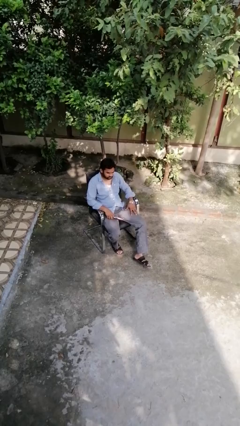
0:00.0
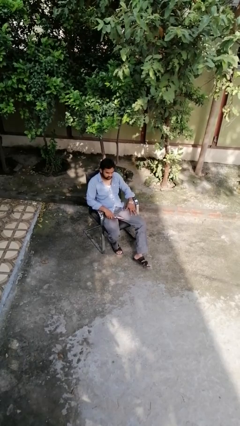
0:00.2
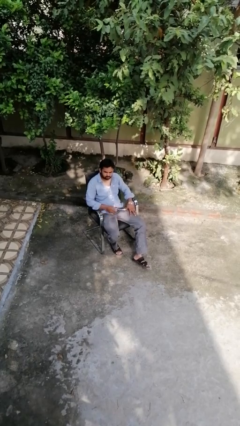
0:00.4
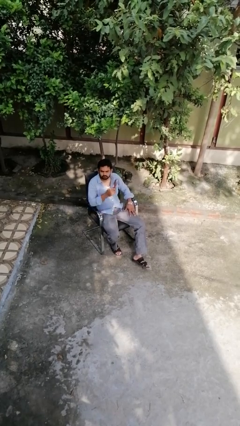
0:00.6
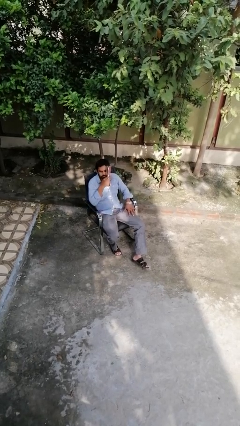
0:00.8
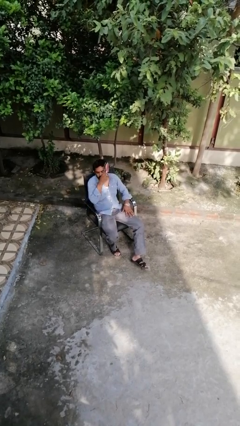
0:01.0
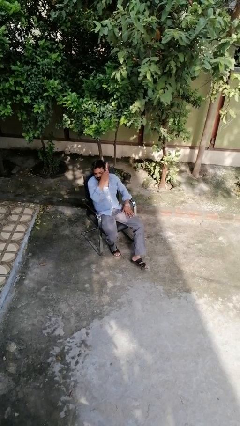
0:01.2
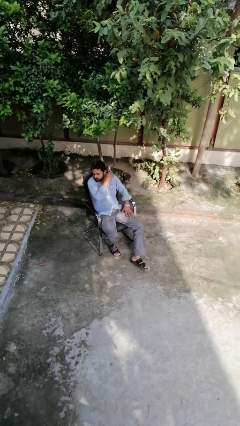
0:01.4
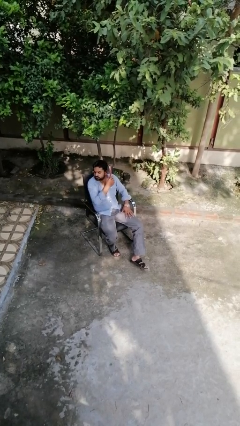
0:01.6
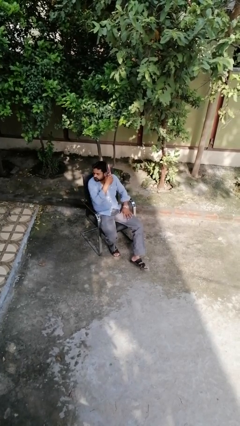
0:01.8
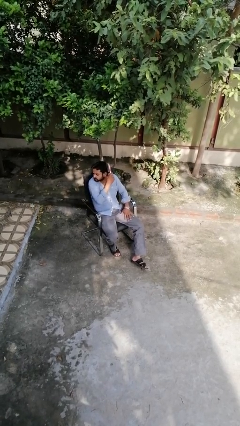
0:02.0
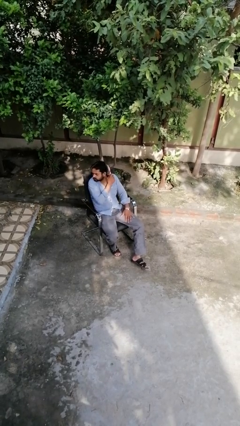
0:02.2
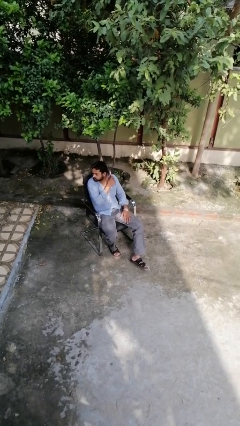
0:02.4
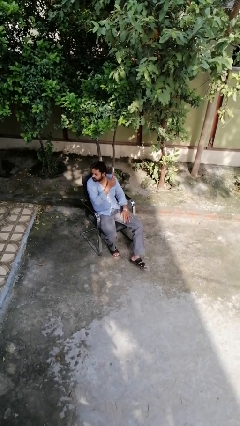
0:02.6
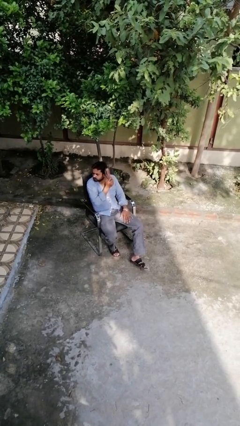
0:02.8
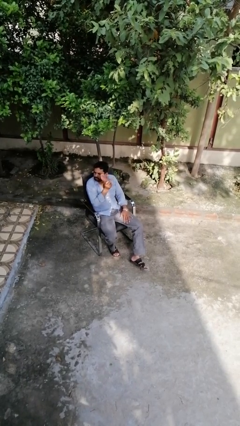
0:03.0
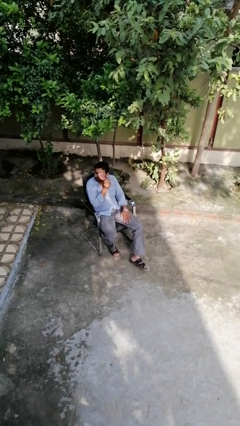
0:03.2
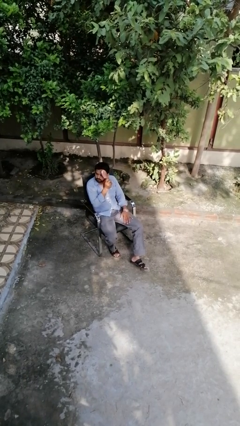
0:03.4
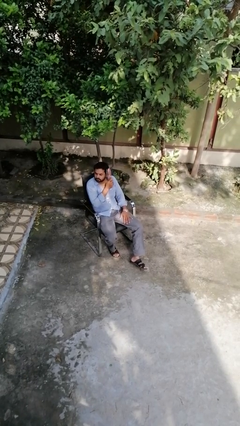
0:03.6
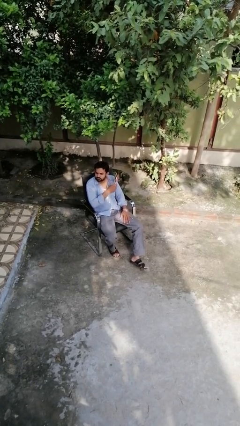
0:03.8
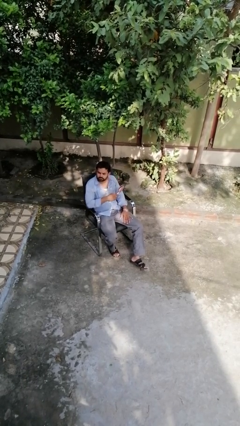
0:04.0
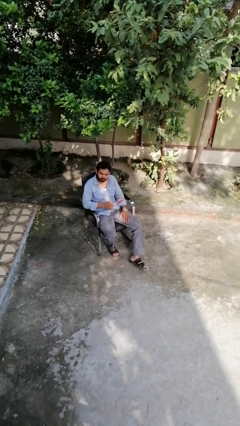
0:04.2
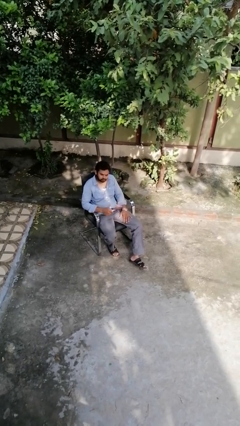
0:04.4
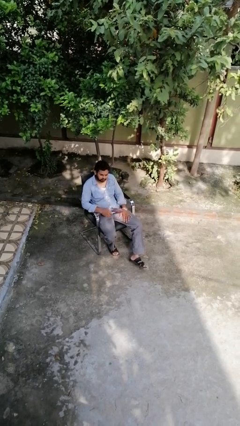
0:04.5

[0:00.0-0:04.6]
person brushes hair

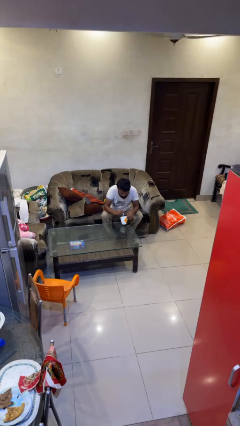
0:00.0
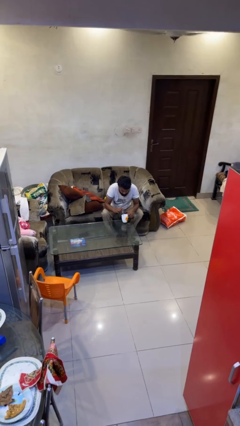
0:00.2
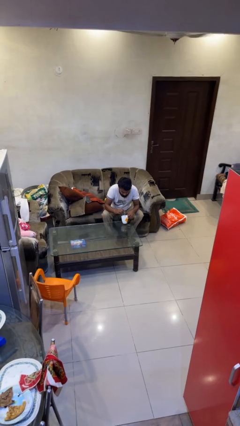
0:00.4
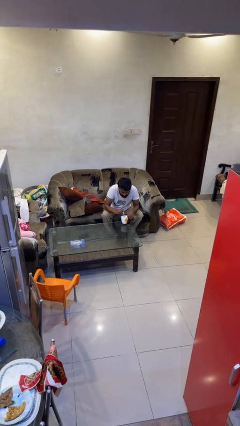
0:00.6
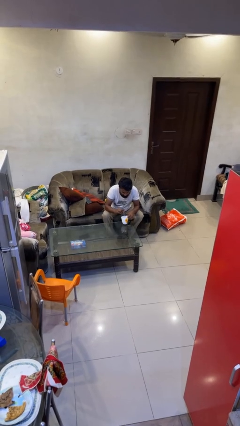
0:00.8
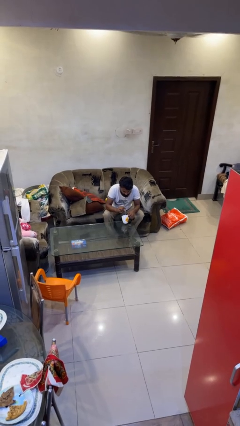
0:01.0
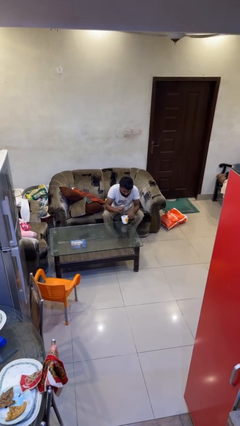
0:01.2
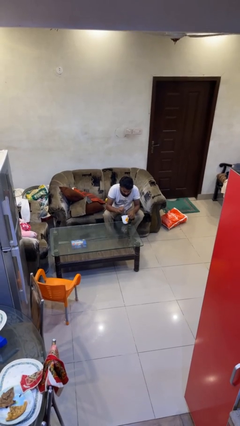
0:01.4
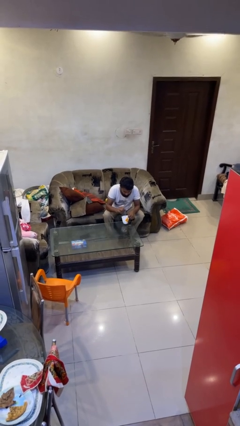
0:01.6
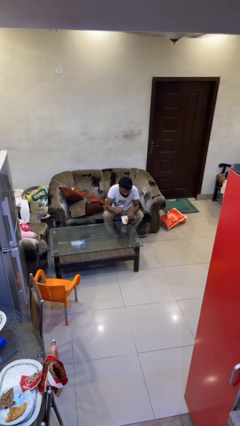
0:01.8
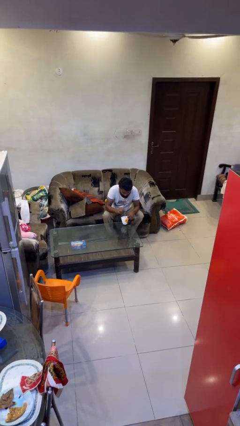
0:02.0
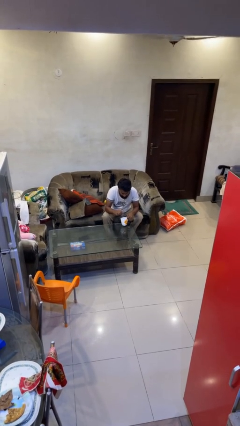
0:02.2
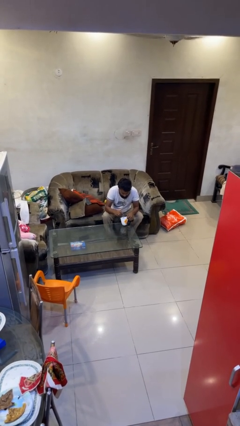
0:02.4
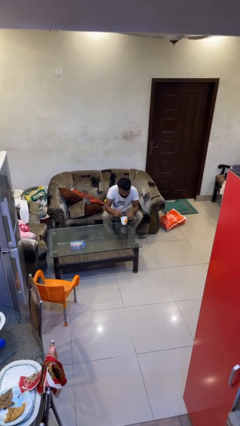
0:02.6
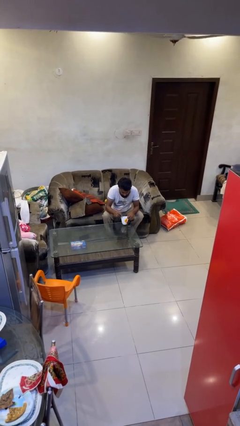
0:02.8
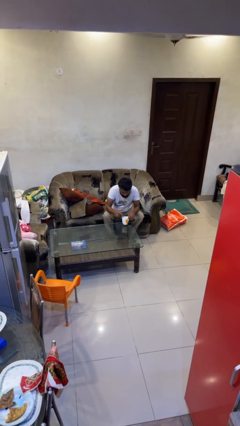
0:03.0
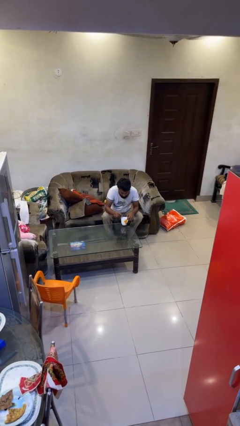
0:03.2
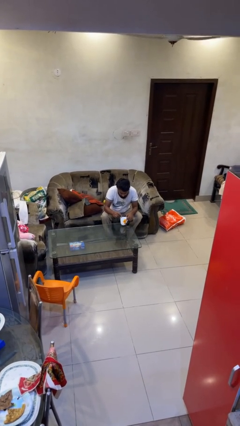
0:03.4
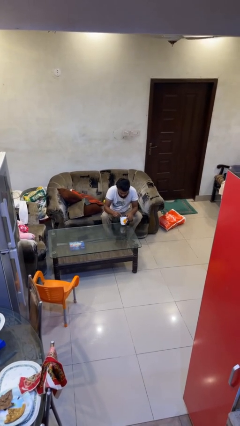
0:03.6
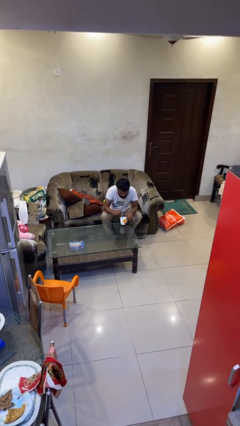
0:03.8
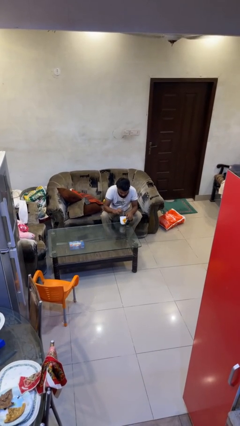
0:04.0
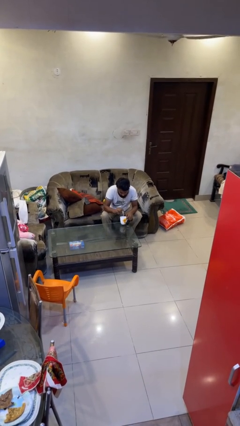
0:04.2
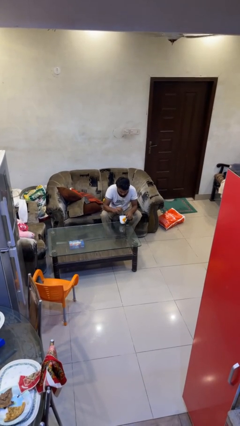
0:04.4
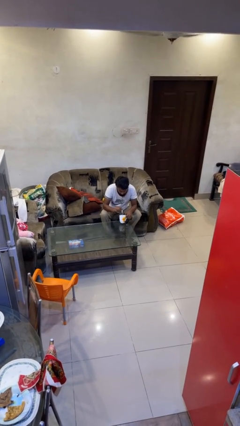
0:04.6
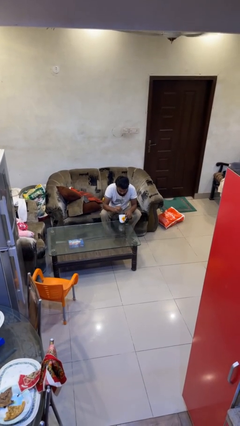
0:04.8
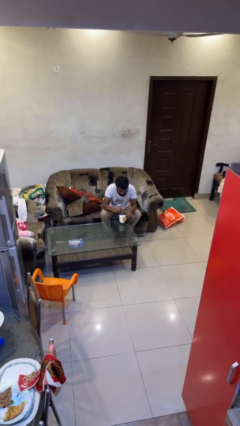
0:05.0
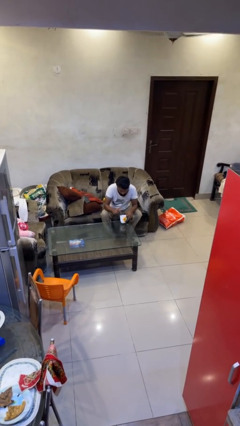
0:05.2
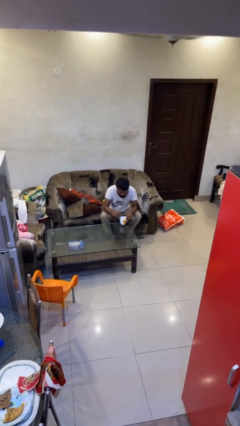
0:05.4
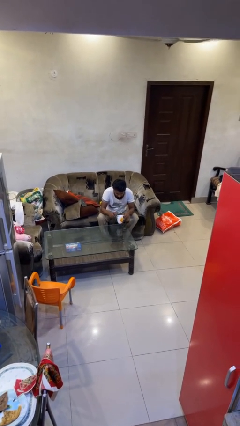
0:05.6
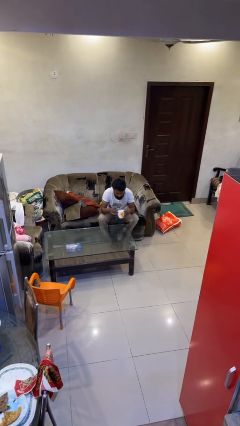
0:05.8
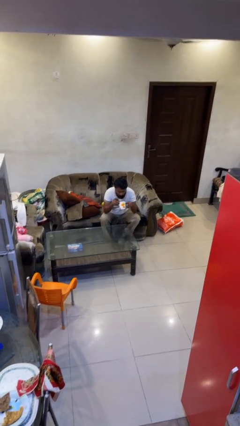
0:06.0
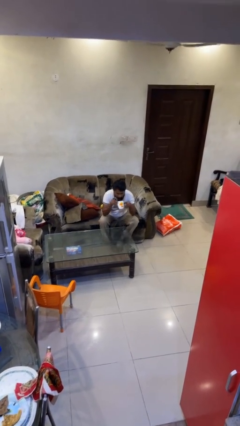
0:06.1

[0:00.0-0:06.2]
person stirs mug

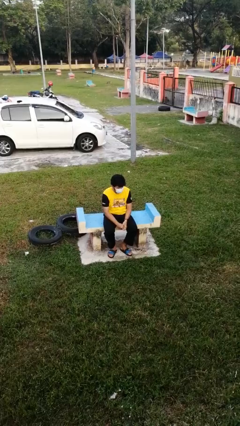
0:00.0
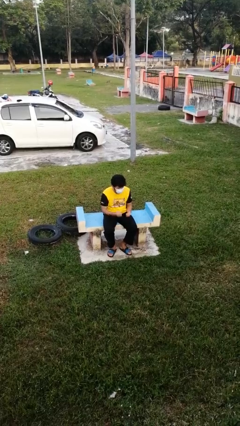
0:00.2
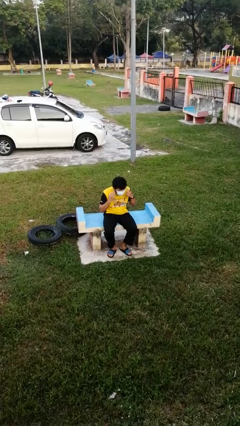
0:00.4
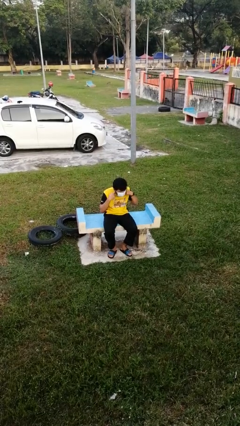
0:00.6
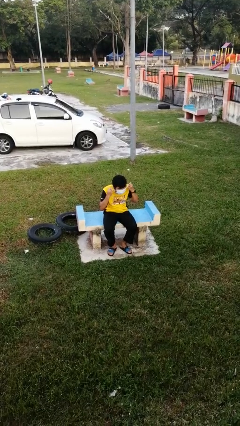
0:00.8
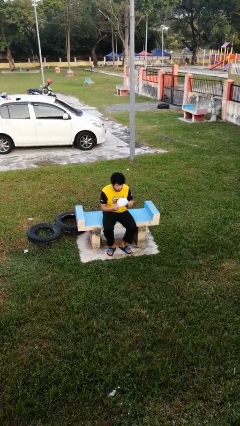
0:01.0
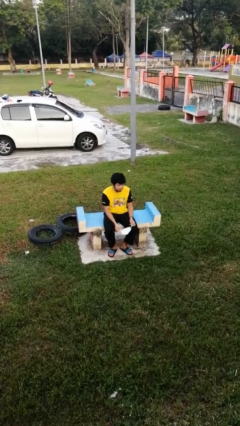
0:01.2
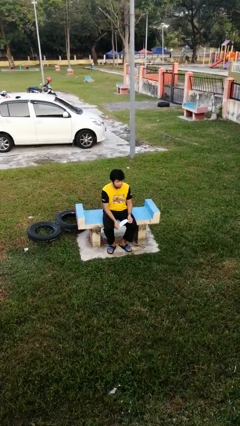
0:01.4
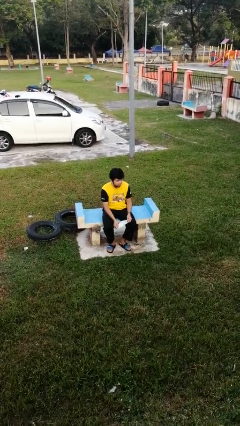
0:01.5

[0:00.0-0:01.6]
person takes off facemask

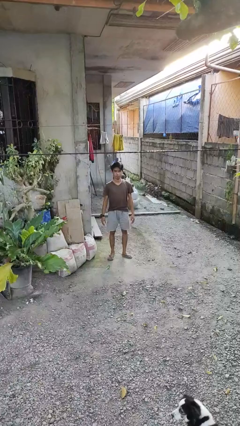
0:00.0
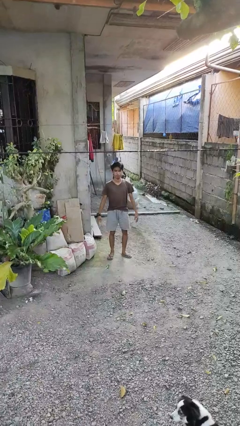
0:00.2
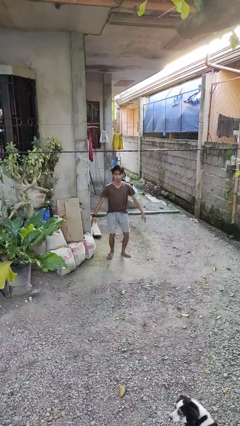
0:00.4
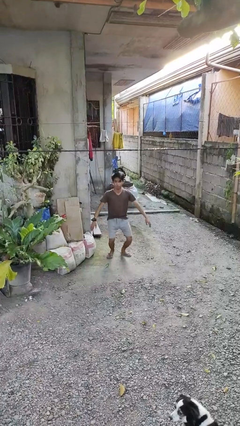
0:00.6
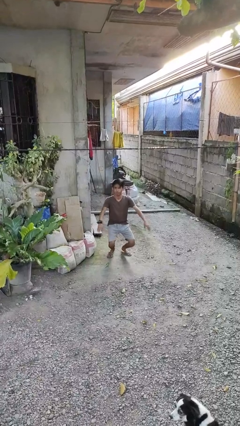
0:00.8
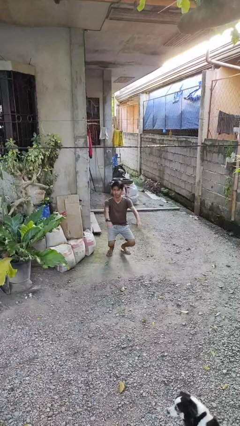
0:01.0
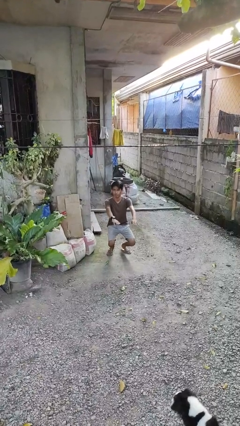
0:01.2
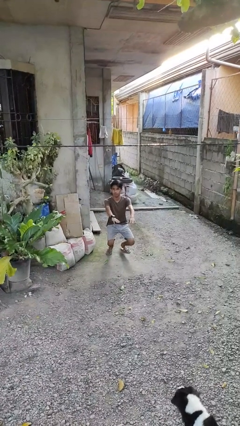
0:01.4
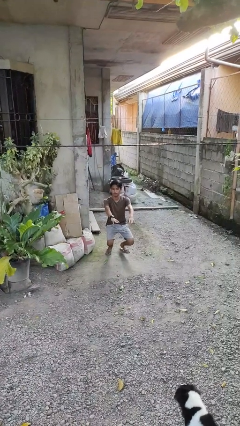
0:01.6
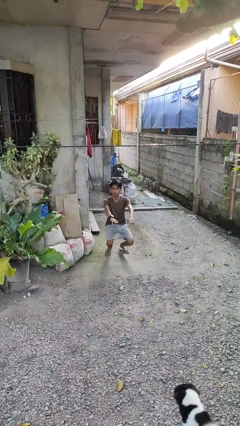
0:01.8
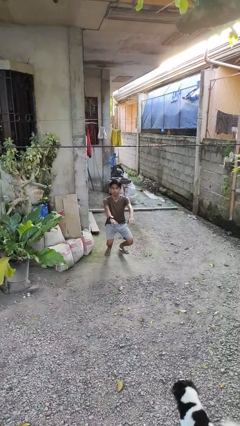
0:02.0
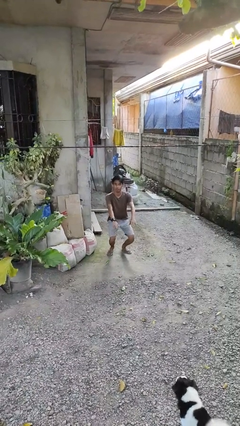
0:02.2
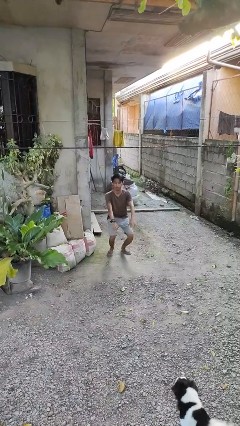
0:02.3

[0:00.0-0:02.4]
person squats

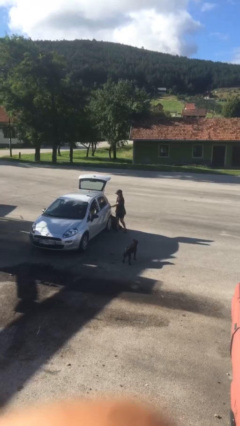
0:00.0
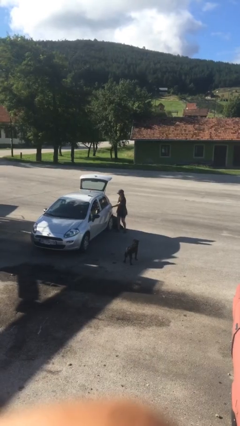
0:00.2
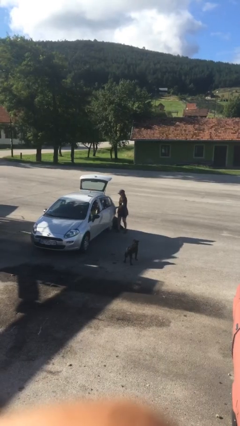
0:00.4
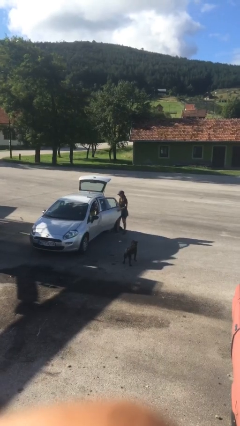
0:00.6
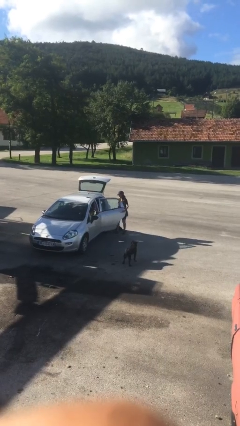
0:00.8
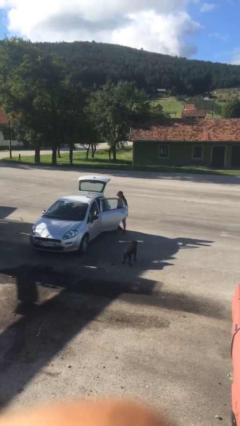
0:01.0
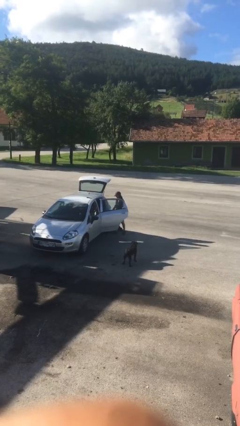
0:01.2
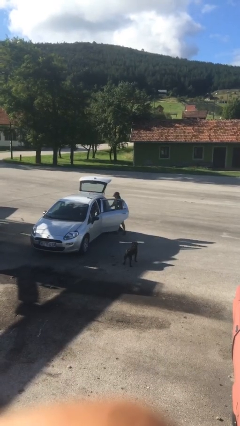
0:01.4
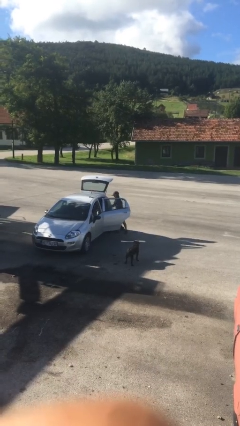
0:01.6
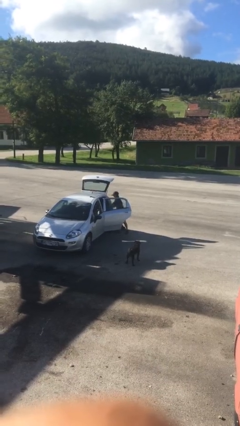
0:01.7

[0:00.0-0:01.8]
person unloads car

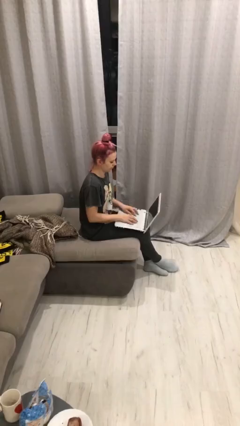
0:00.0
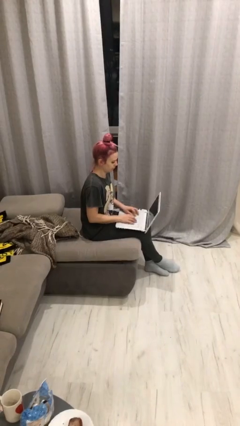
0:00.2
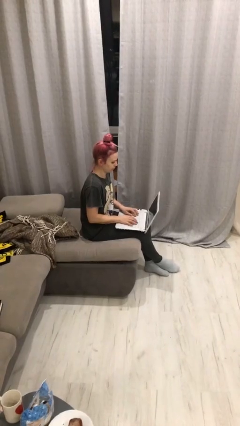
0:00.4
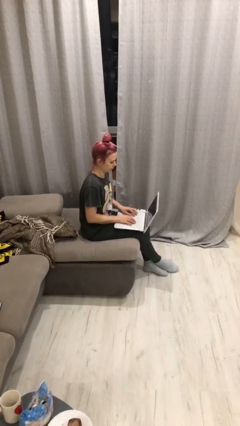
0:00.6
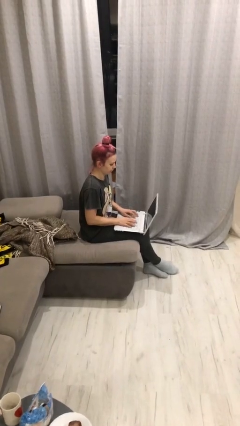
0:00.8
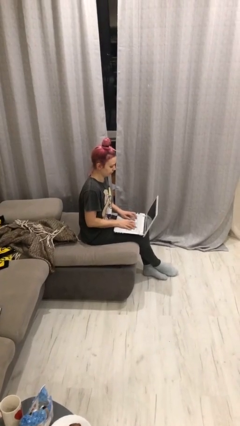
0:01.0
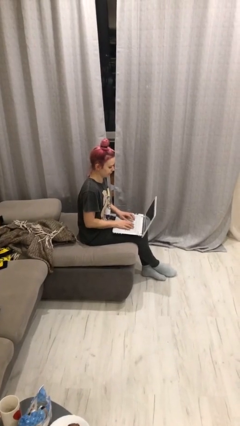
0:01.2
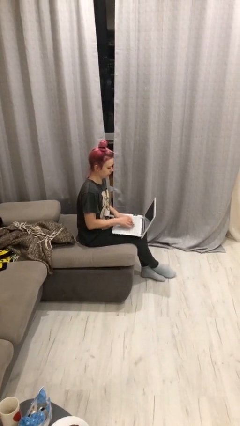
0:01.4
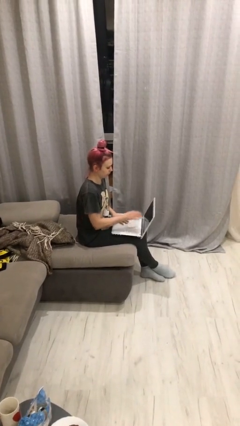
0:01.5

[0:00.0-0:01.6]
person interacts with laptop
